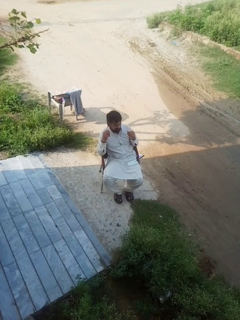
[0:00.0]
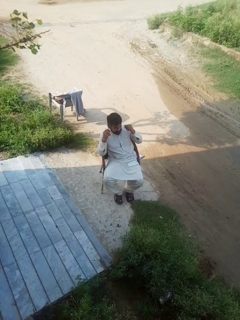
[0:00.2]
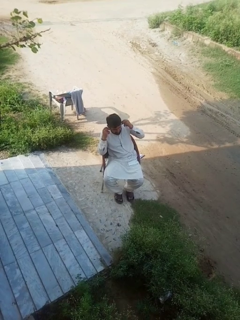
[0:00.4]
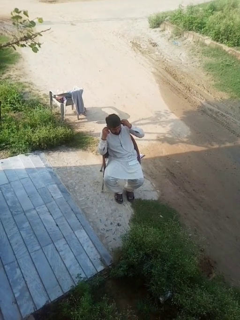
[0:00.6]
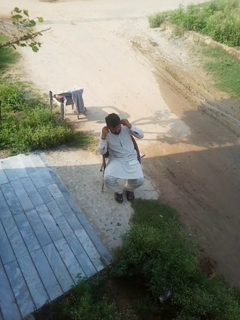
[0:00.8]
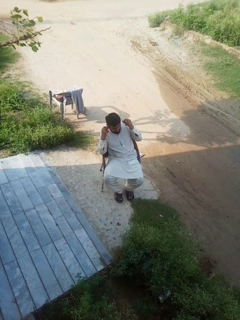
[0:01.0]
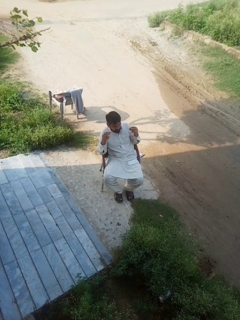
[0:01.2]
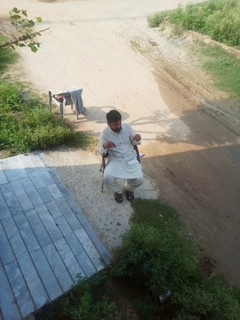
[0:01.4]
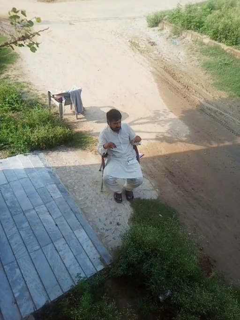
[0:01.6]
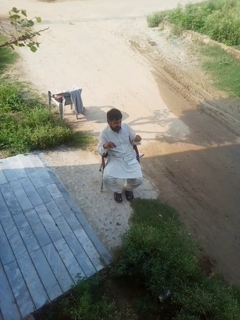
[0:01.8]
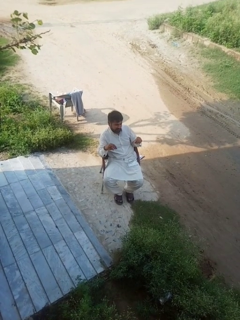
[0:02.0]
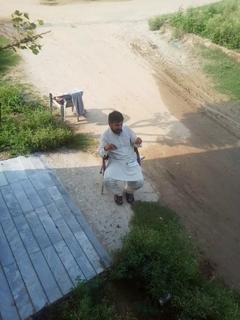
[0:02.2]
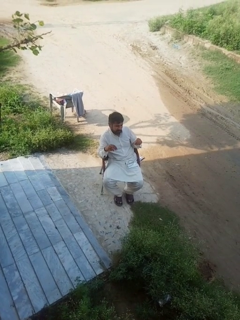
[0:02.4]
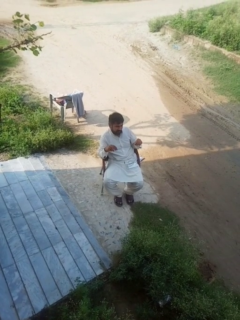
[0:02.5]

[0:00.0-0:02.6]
person takes off headphones

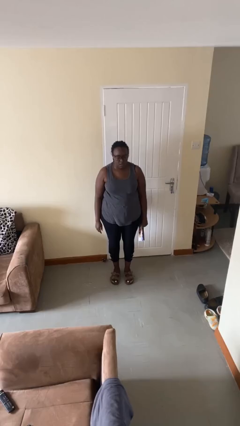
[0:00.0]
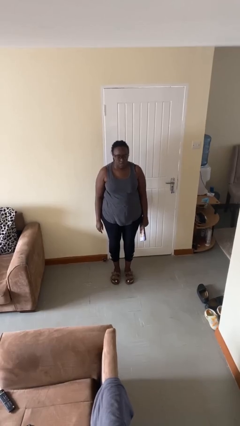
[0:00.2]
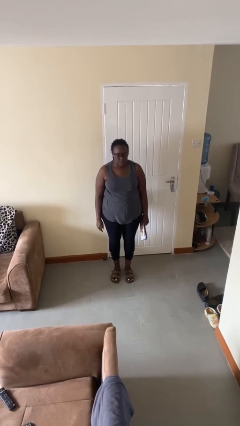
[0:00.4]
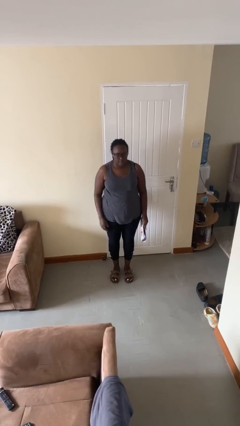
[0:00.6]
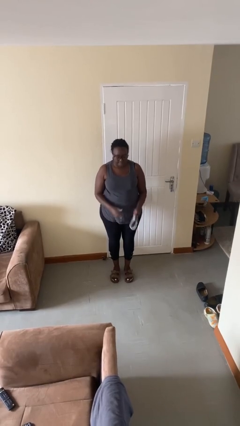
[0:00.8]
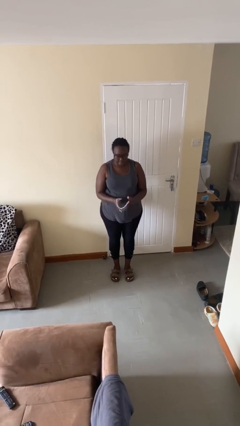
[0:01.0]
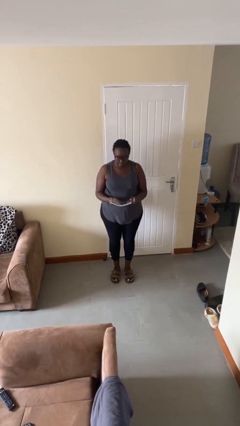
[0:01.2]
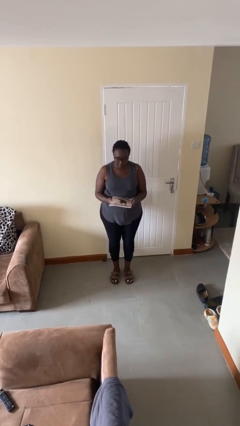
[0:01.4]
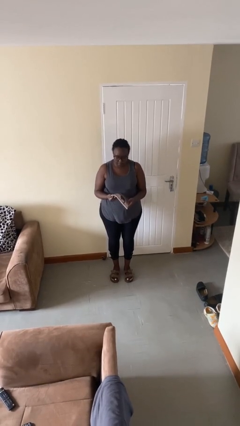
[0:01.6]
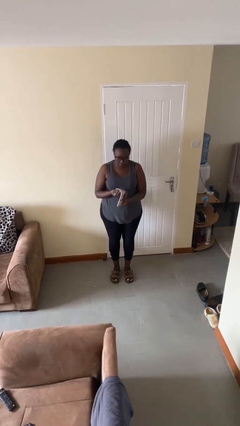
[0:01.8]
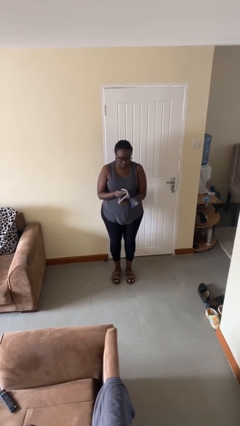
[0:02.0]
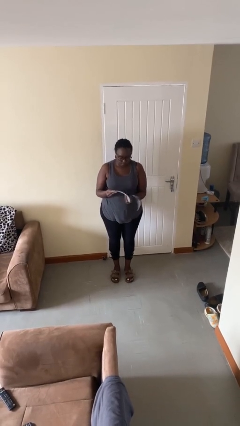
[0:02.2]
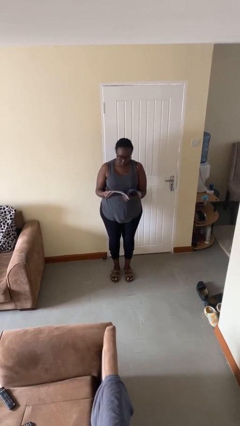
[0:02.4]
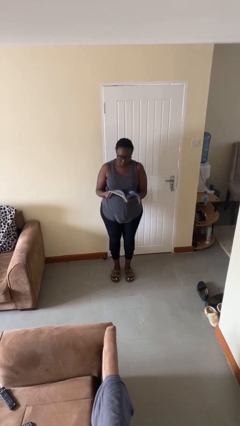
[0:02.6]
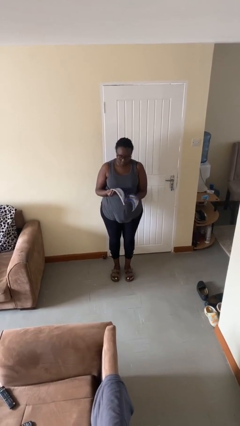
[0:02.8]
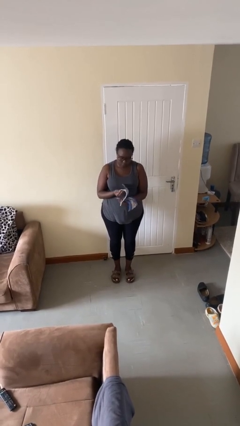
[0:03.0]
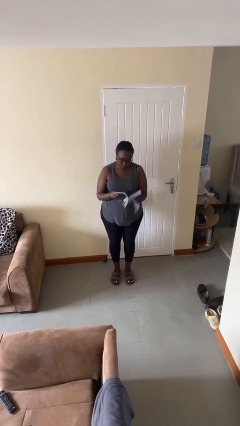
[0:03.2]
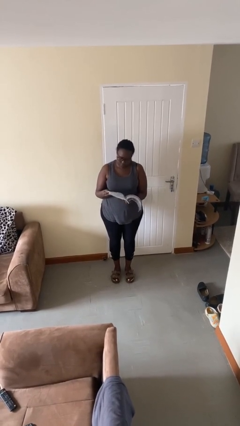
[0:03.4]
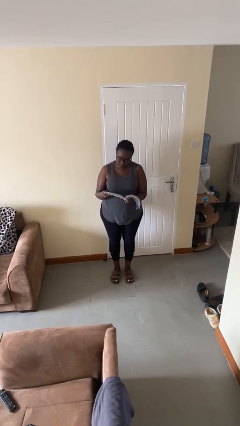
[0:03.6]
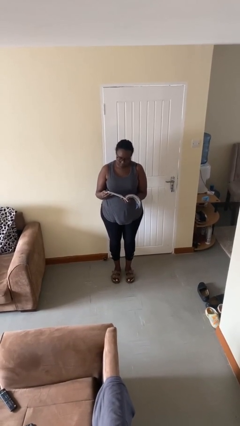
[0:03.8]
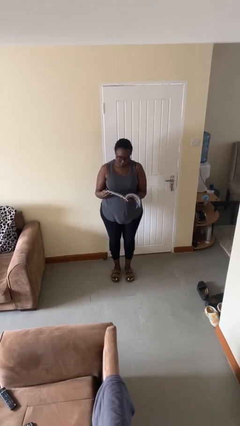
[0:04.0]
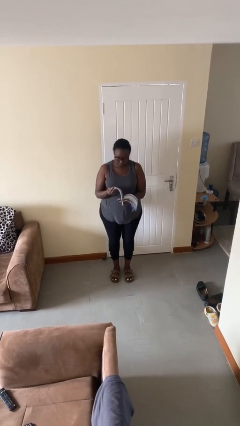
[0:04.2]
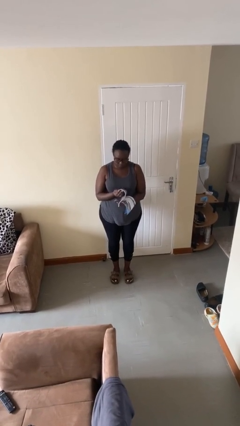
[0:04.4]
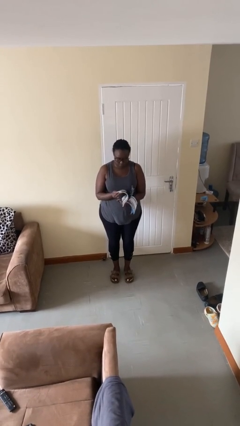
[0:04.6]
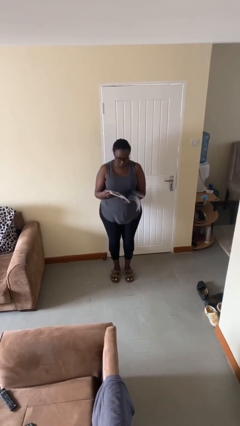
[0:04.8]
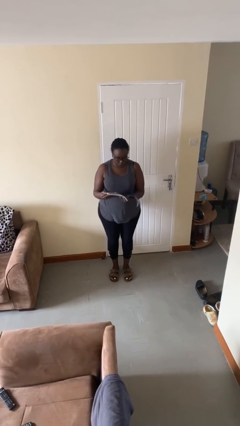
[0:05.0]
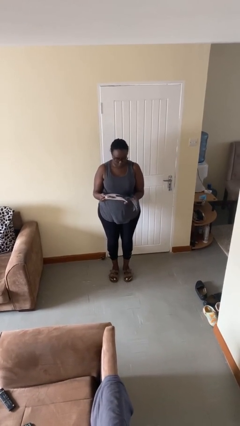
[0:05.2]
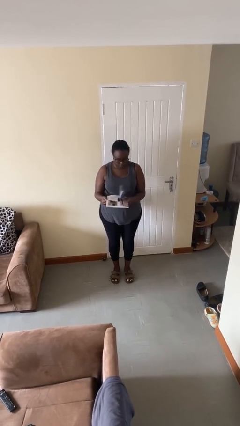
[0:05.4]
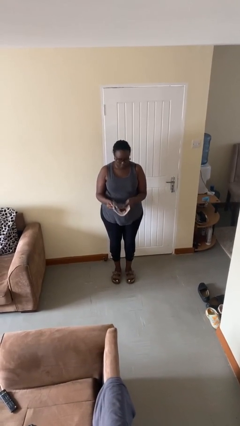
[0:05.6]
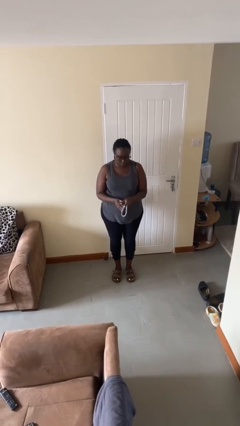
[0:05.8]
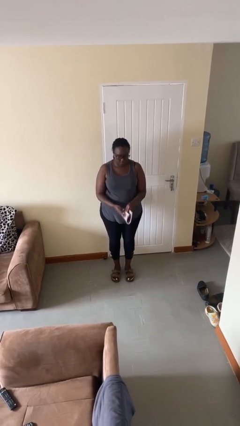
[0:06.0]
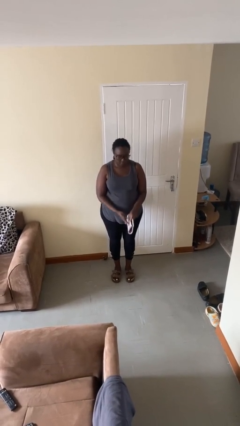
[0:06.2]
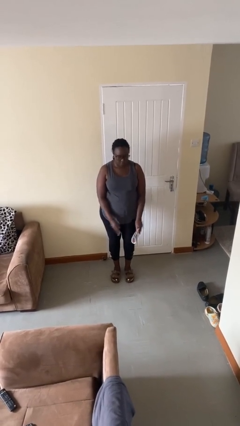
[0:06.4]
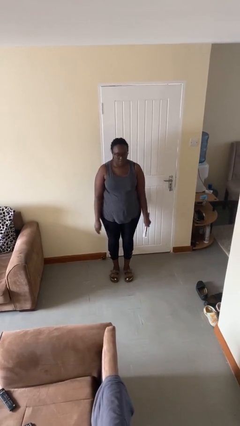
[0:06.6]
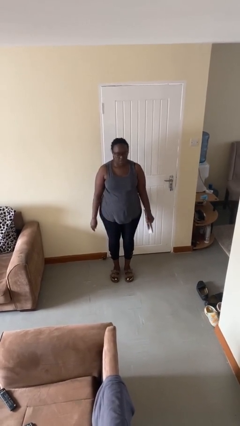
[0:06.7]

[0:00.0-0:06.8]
person reads magazine

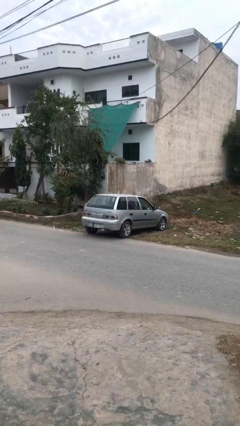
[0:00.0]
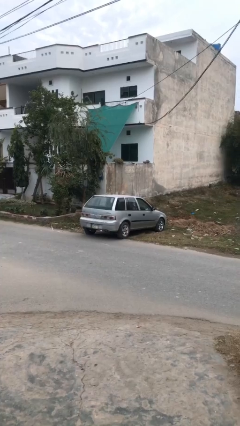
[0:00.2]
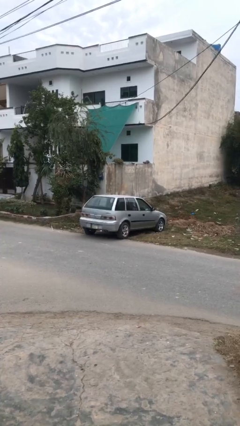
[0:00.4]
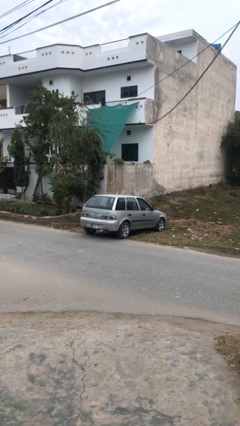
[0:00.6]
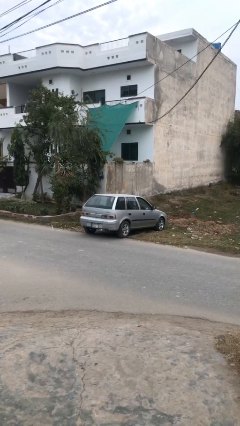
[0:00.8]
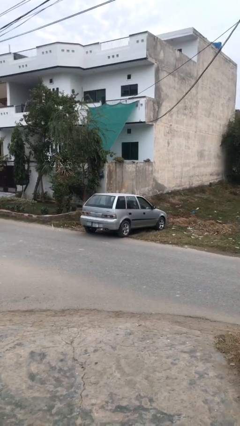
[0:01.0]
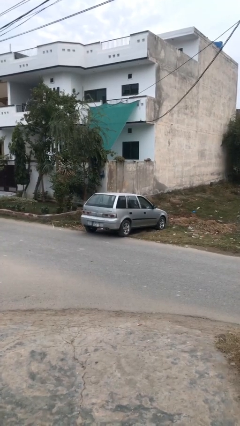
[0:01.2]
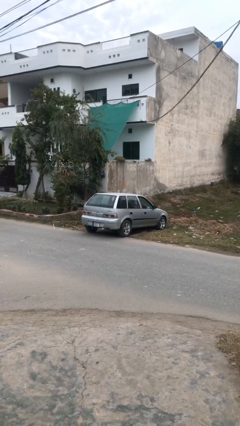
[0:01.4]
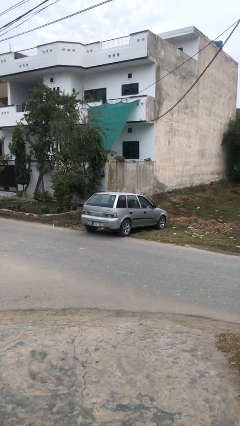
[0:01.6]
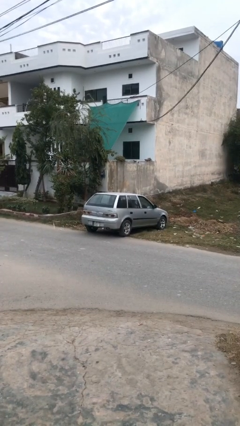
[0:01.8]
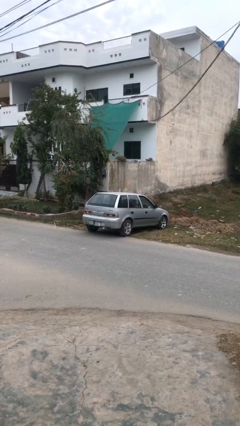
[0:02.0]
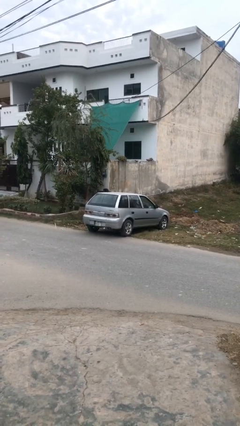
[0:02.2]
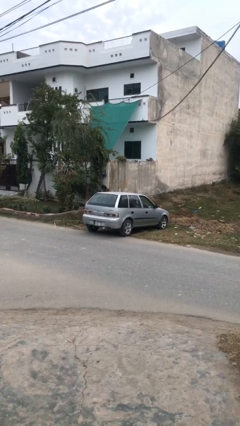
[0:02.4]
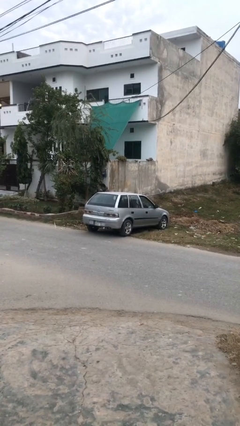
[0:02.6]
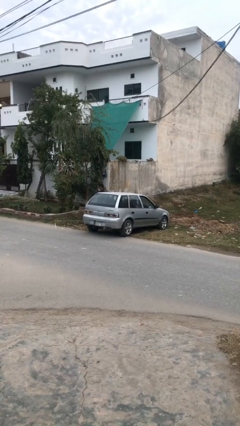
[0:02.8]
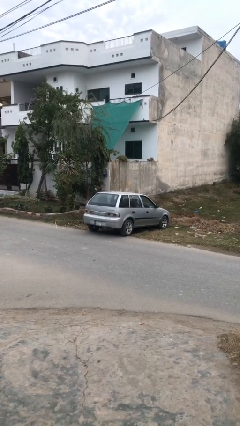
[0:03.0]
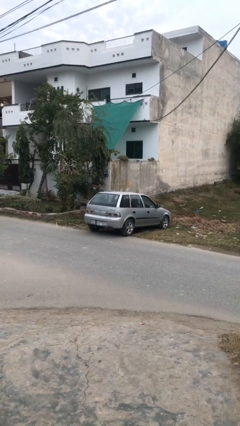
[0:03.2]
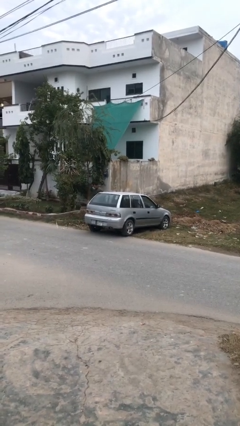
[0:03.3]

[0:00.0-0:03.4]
car drops off person

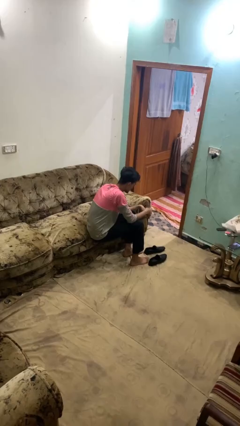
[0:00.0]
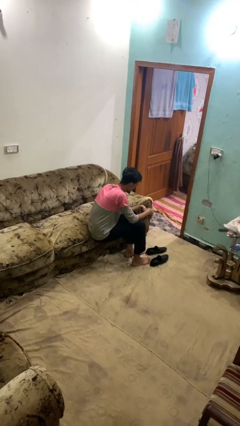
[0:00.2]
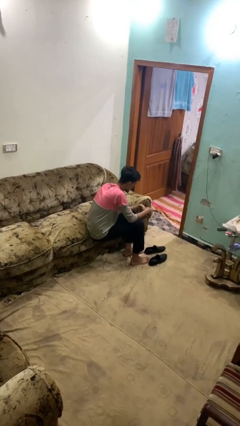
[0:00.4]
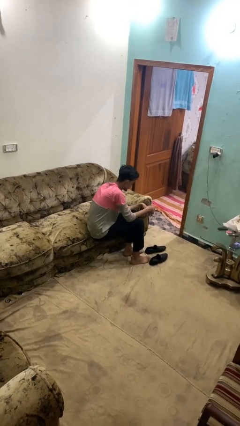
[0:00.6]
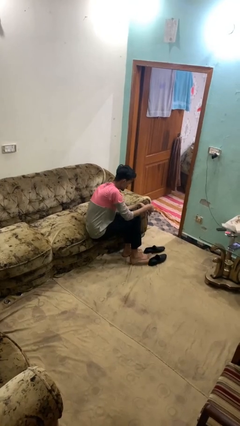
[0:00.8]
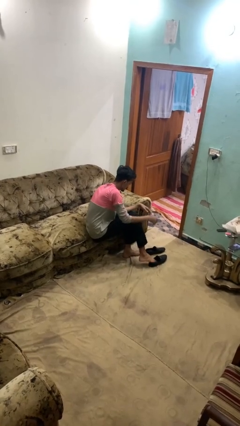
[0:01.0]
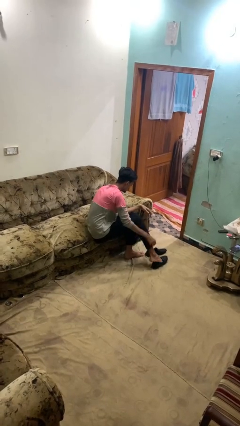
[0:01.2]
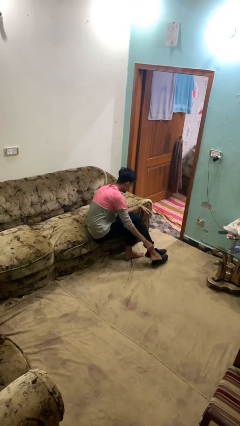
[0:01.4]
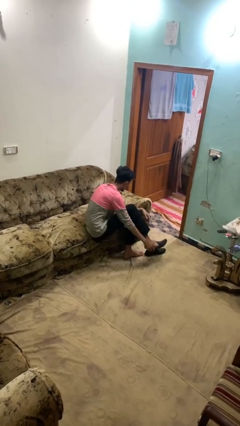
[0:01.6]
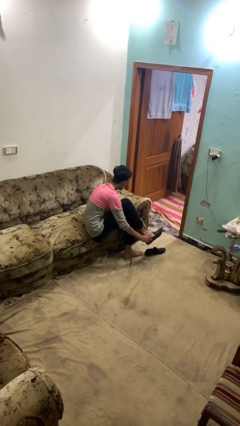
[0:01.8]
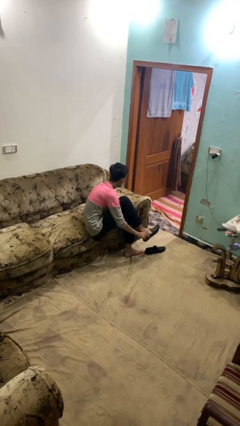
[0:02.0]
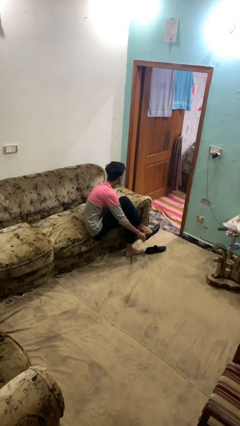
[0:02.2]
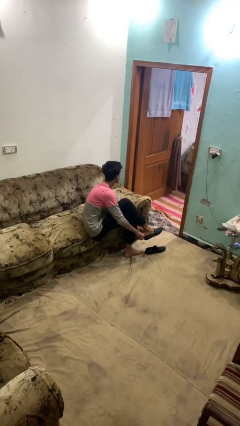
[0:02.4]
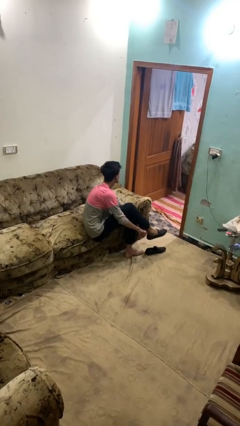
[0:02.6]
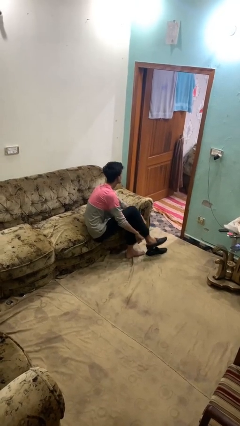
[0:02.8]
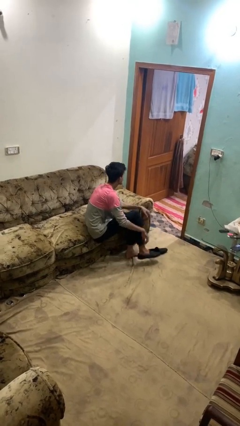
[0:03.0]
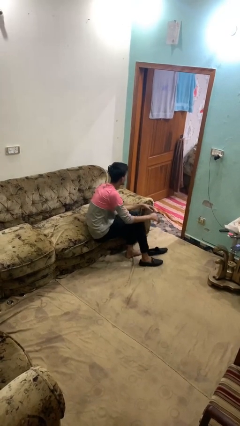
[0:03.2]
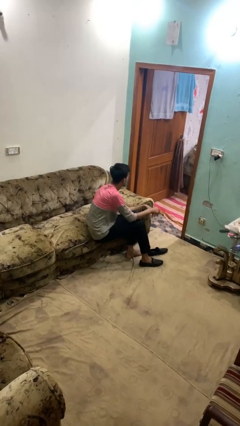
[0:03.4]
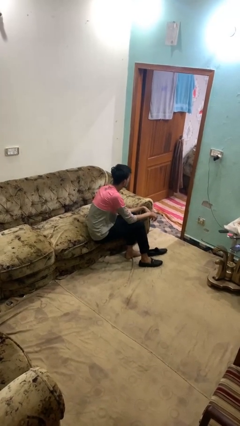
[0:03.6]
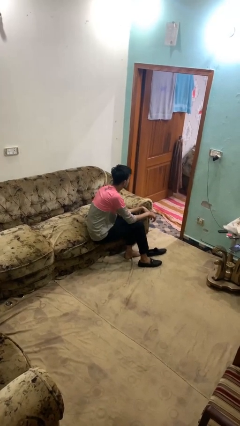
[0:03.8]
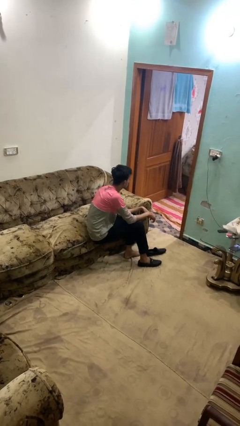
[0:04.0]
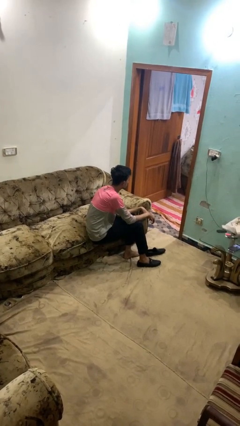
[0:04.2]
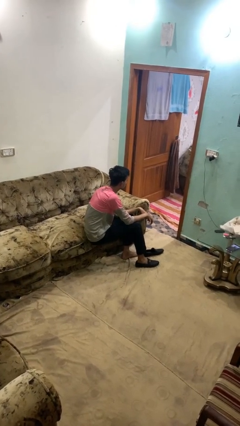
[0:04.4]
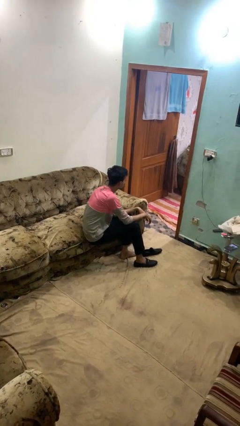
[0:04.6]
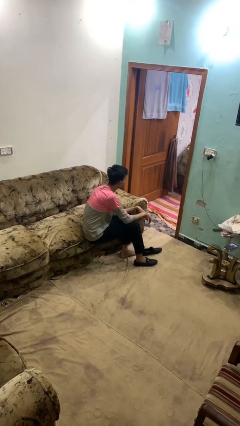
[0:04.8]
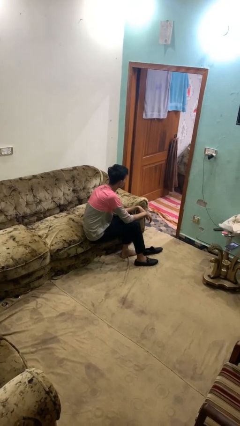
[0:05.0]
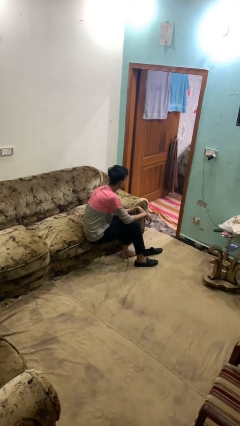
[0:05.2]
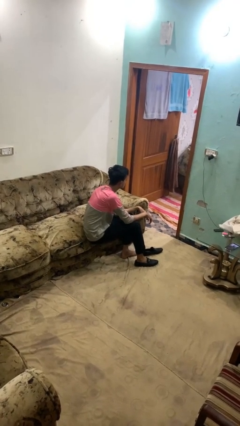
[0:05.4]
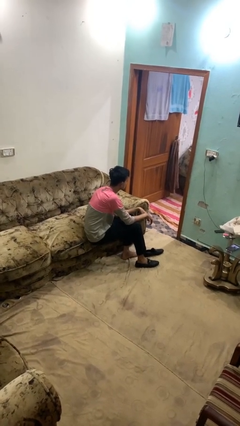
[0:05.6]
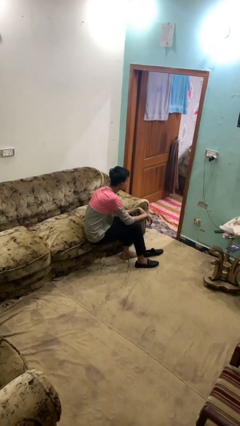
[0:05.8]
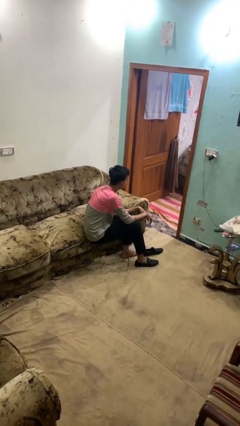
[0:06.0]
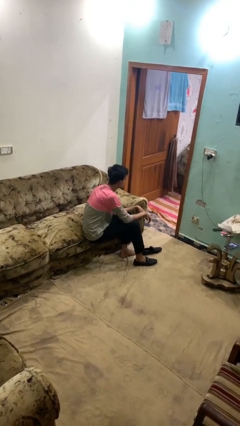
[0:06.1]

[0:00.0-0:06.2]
person puts on shoes
